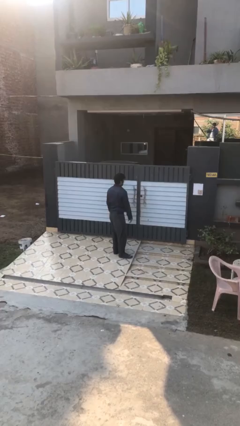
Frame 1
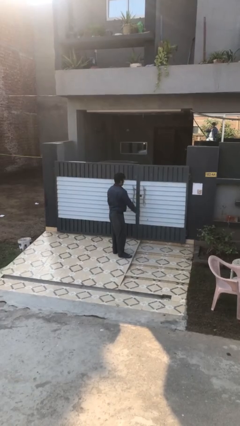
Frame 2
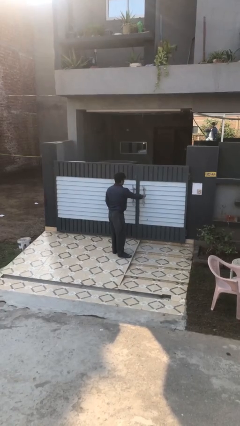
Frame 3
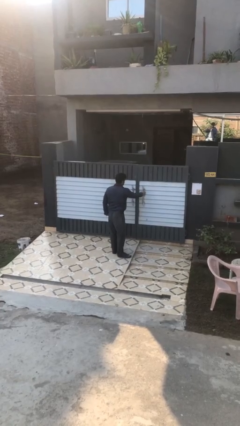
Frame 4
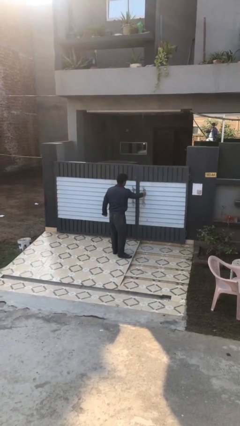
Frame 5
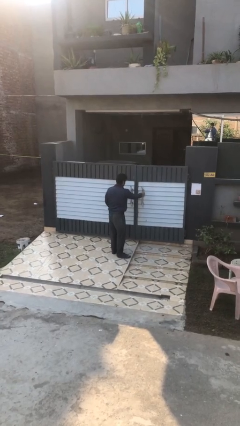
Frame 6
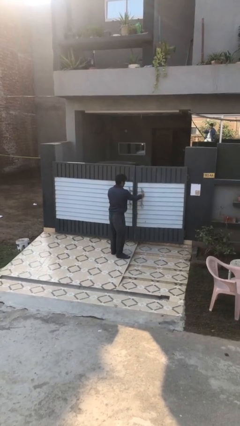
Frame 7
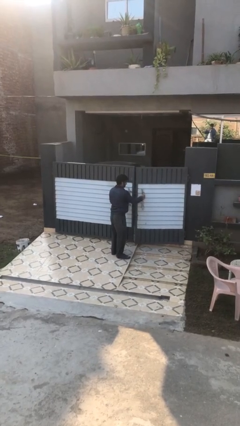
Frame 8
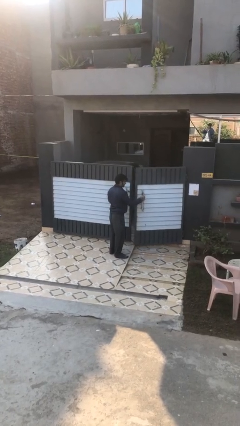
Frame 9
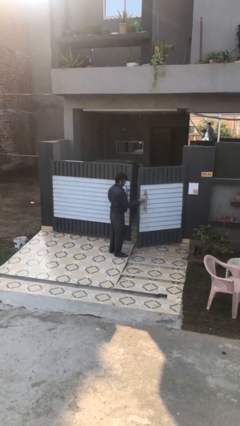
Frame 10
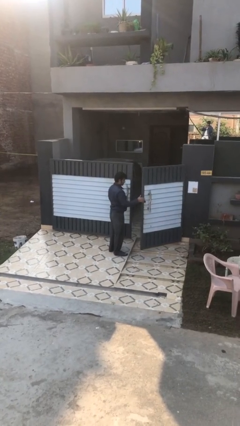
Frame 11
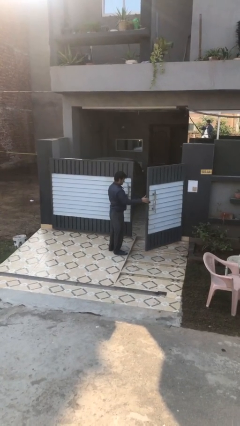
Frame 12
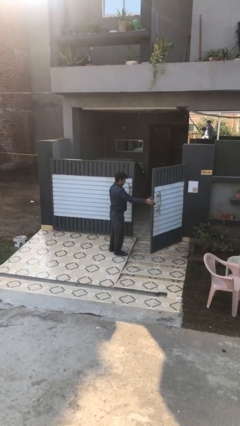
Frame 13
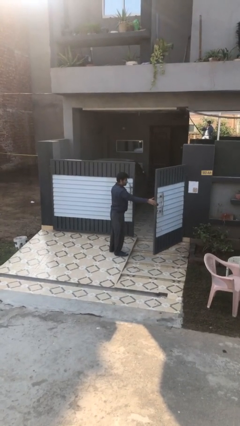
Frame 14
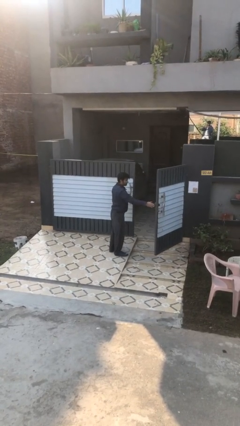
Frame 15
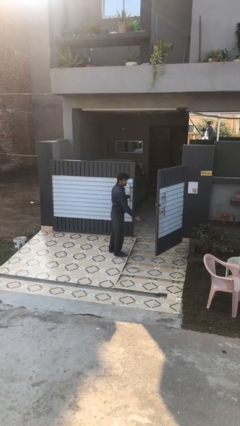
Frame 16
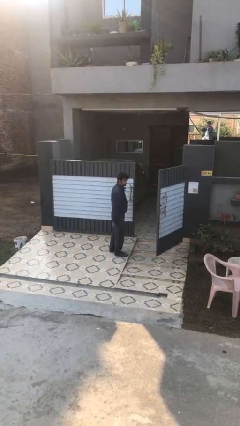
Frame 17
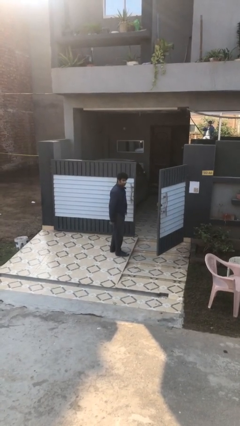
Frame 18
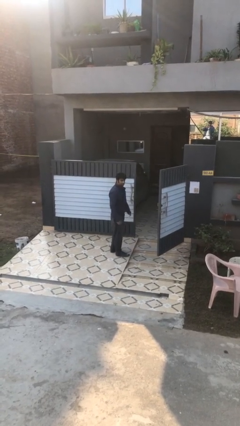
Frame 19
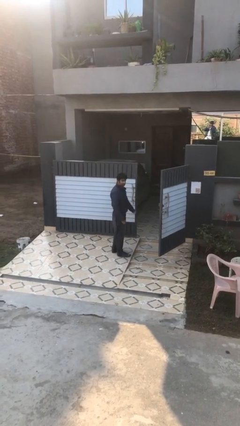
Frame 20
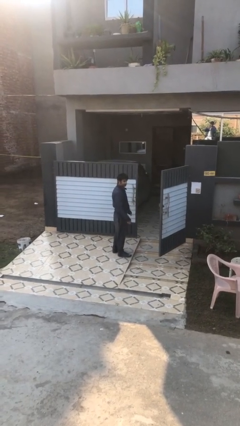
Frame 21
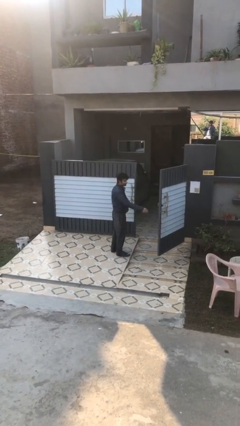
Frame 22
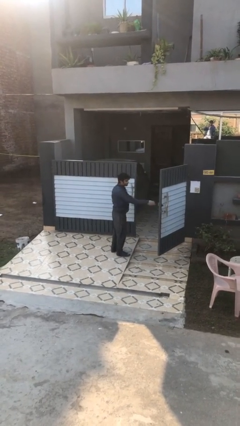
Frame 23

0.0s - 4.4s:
person opens facility door

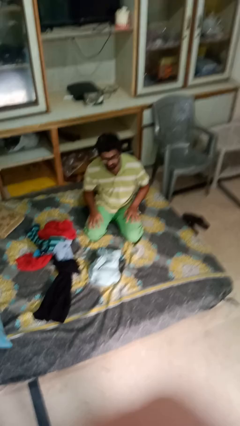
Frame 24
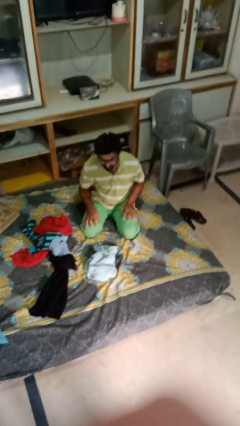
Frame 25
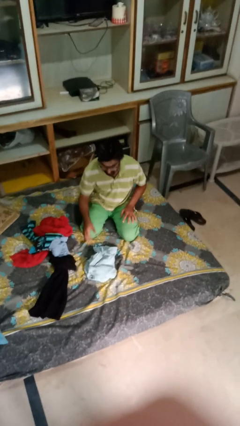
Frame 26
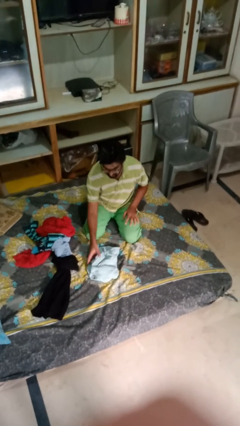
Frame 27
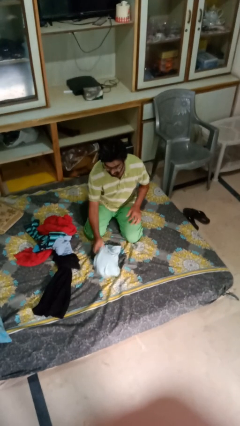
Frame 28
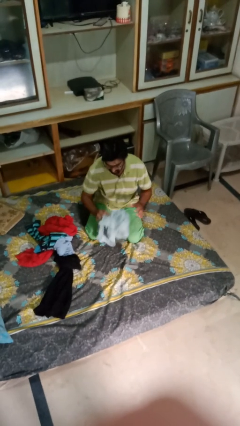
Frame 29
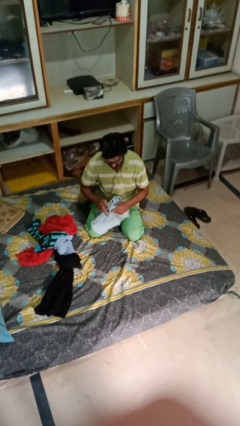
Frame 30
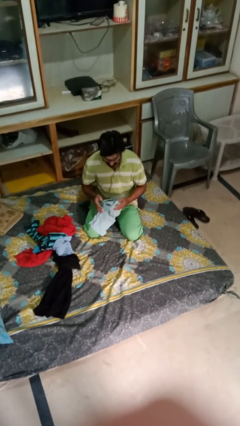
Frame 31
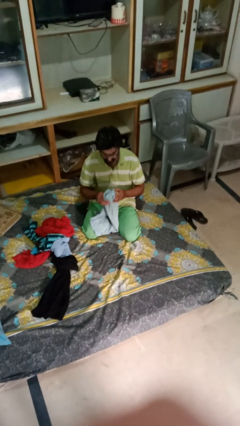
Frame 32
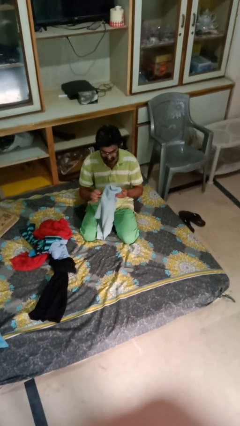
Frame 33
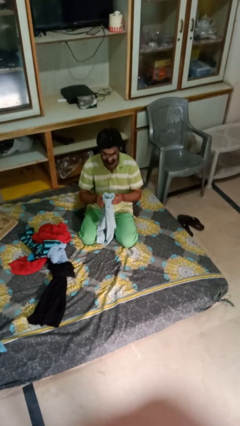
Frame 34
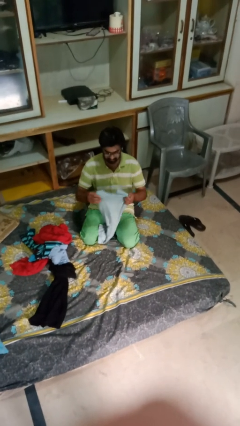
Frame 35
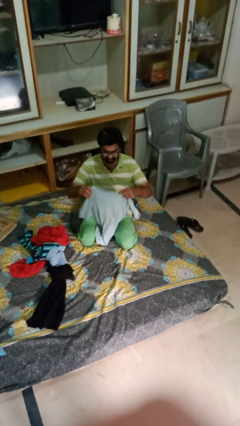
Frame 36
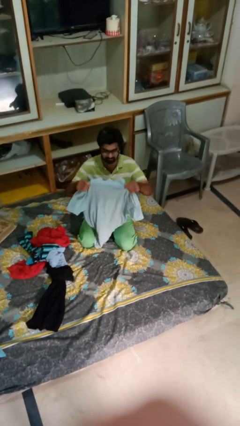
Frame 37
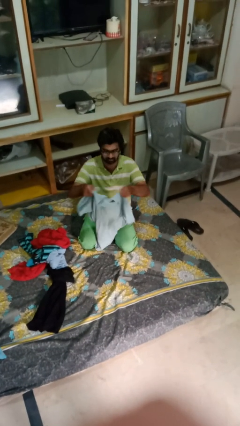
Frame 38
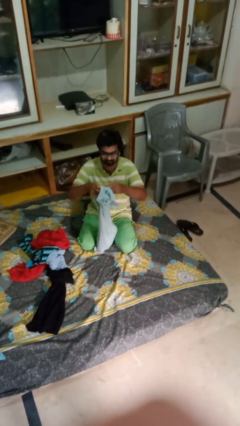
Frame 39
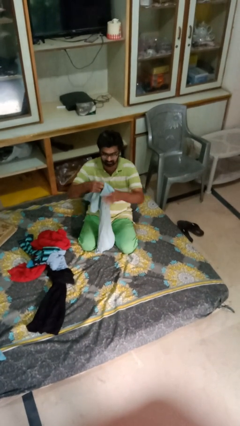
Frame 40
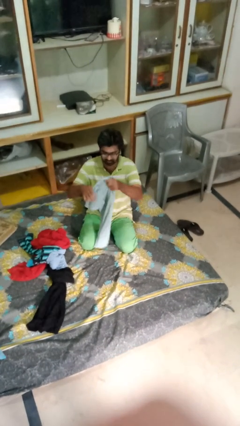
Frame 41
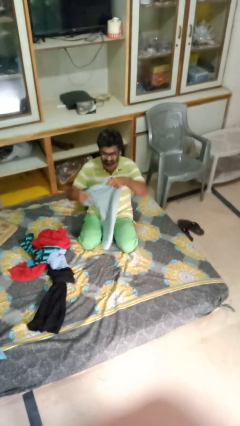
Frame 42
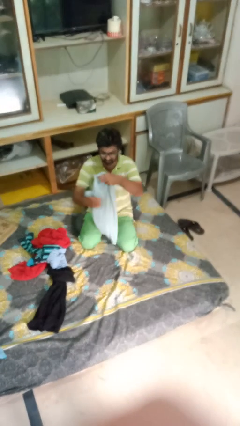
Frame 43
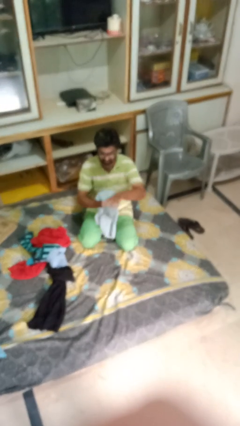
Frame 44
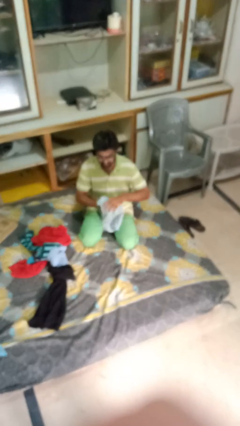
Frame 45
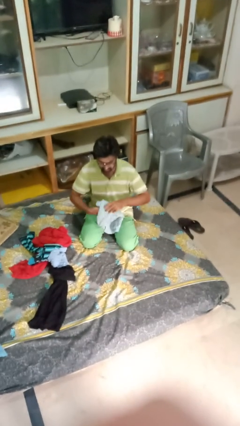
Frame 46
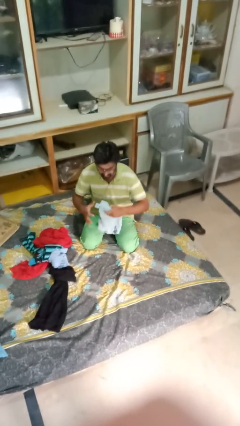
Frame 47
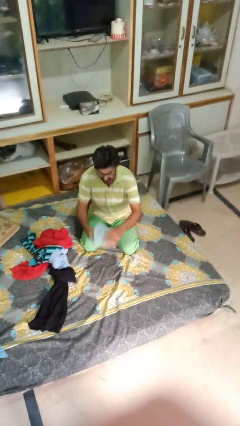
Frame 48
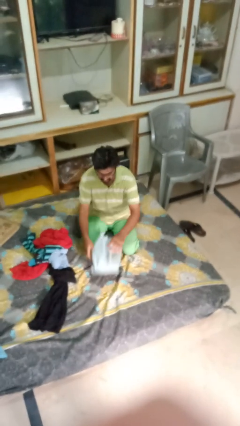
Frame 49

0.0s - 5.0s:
person folds shirt

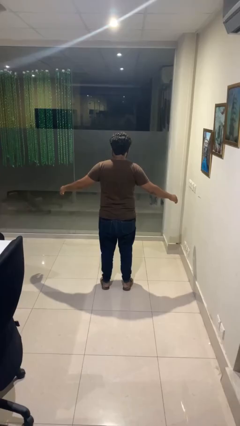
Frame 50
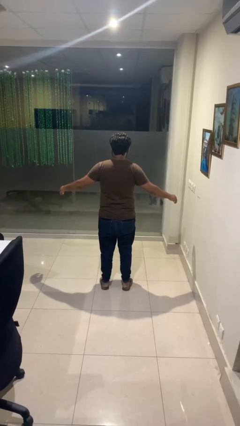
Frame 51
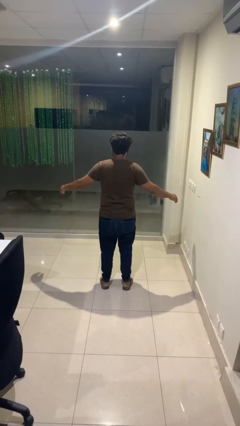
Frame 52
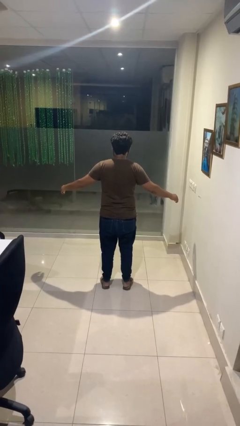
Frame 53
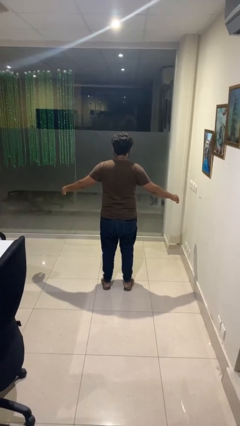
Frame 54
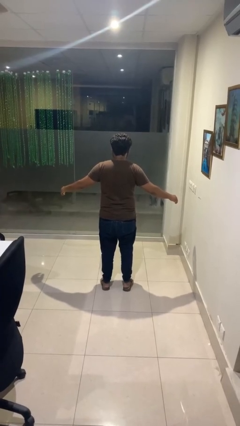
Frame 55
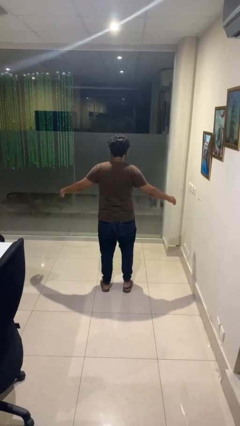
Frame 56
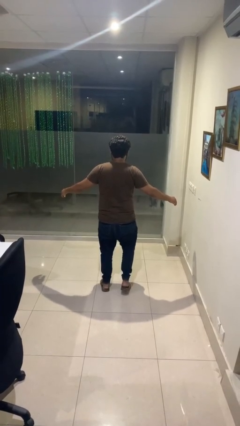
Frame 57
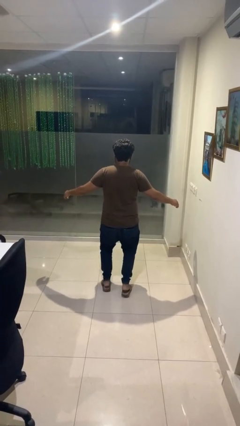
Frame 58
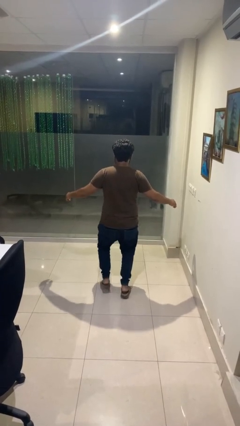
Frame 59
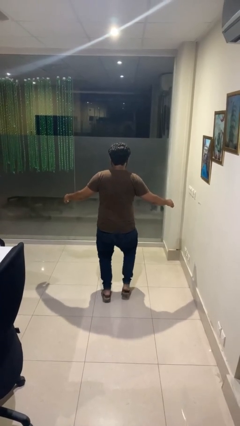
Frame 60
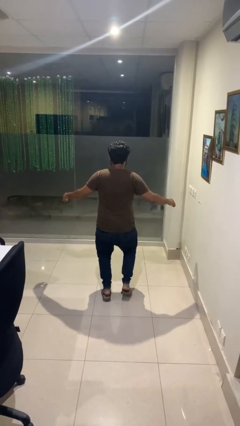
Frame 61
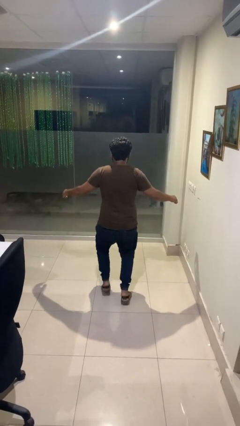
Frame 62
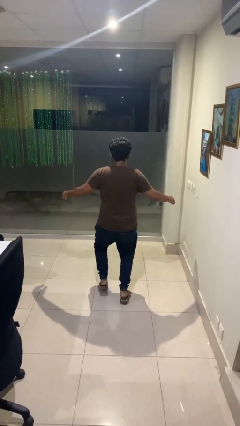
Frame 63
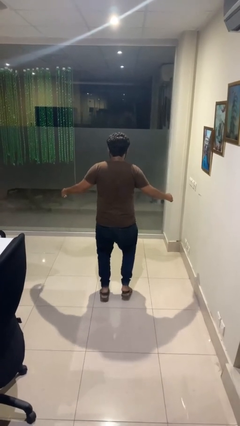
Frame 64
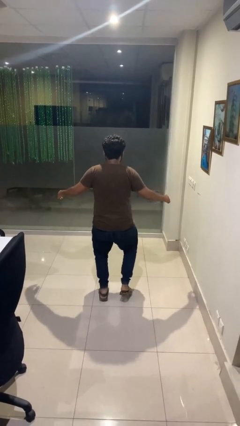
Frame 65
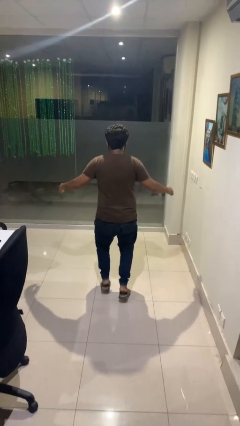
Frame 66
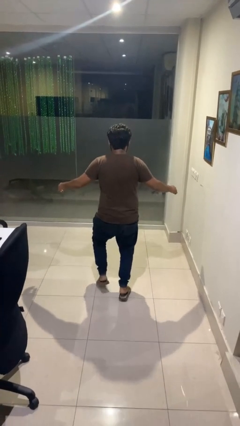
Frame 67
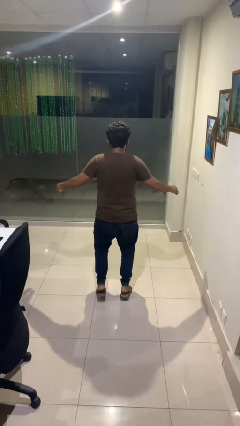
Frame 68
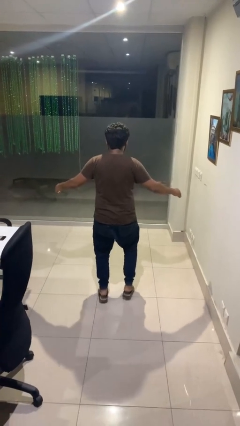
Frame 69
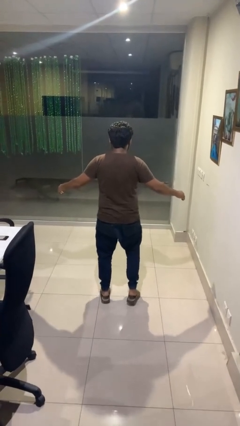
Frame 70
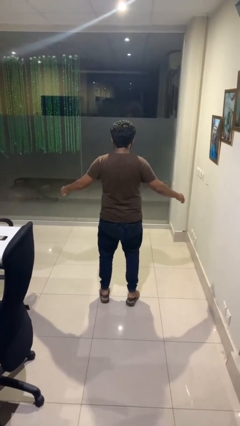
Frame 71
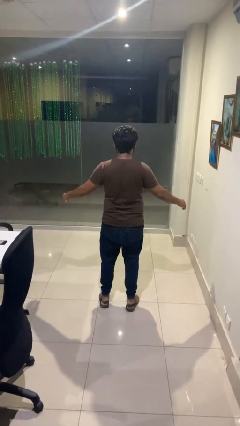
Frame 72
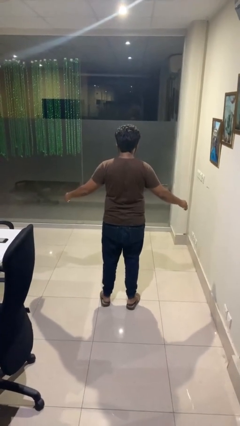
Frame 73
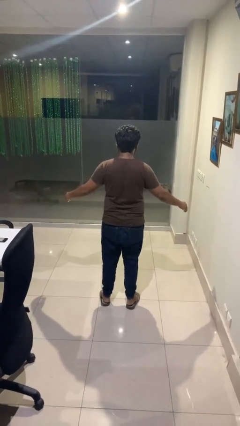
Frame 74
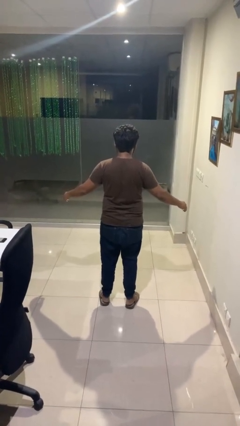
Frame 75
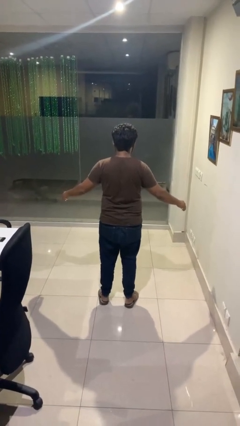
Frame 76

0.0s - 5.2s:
person walks tiptoe

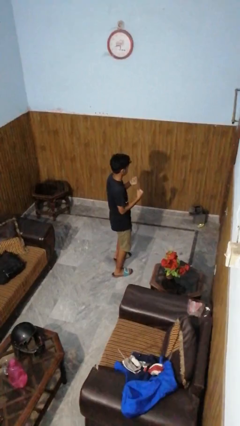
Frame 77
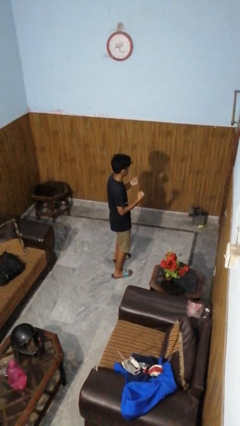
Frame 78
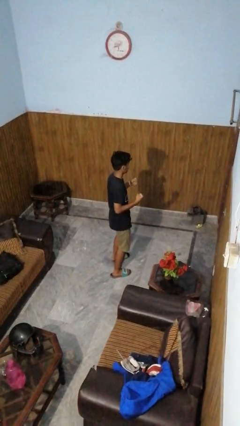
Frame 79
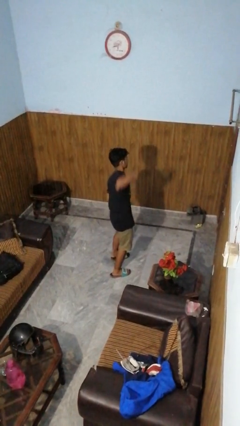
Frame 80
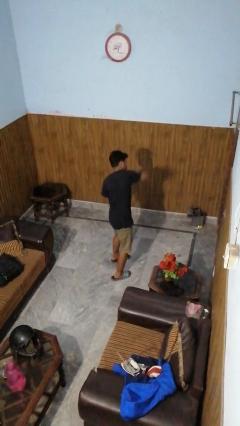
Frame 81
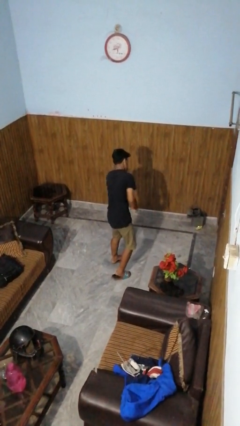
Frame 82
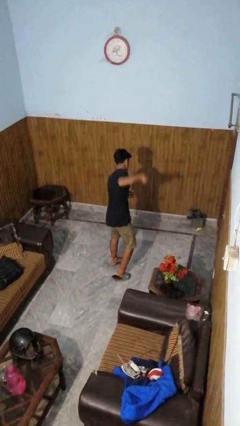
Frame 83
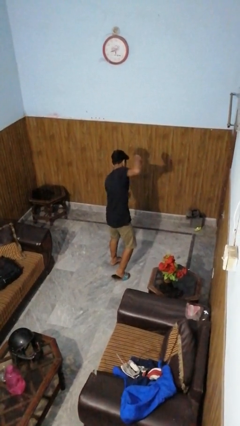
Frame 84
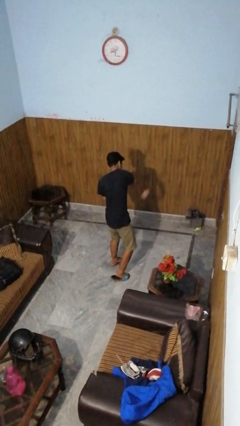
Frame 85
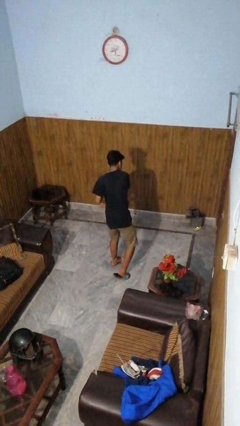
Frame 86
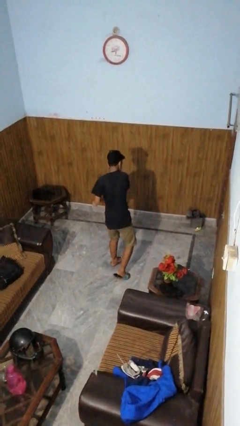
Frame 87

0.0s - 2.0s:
person punches

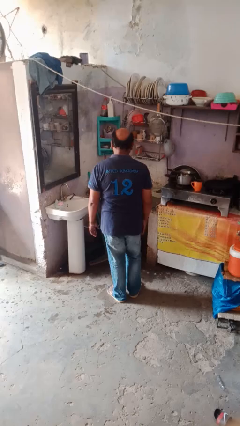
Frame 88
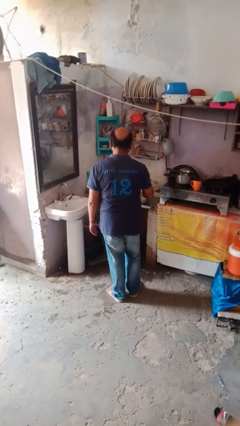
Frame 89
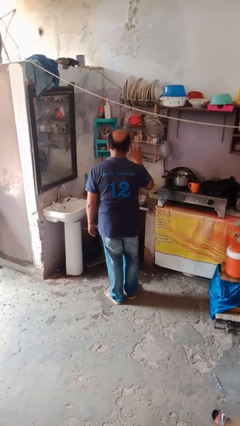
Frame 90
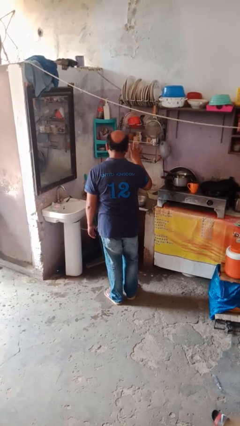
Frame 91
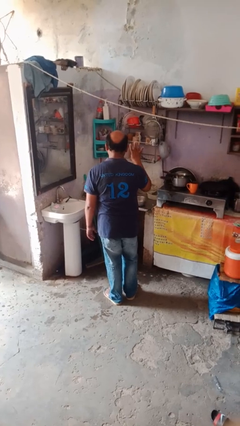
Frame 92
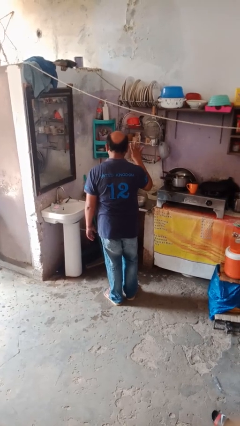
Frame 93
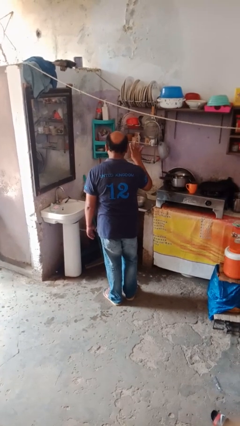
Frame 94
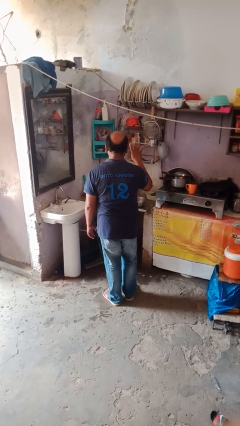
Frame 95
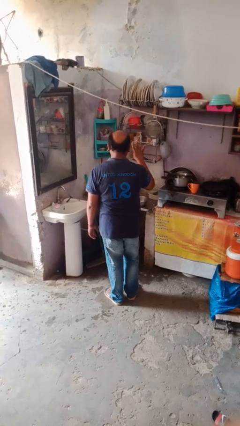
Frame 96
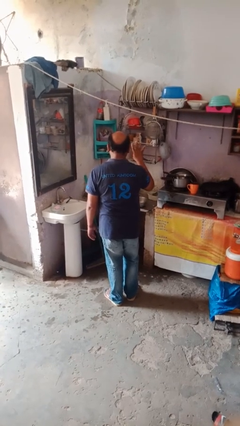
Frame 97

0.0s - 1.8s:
person gestures number four
